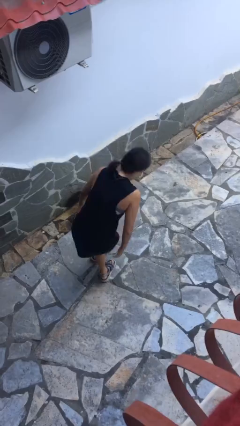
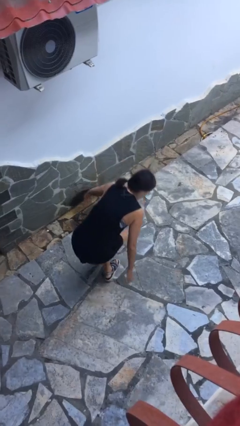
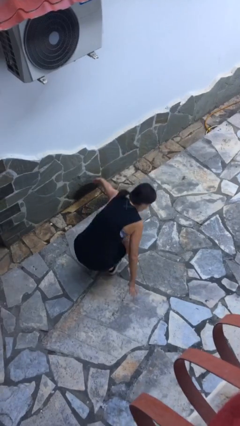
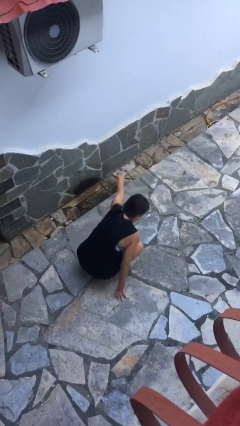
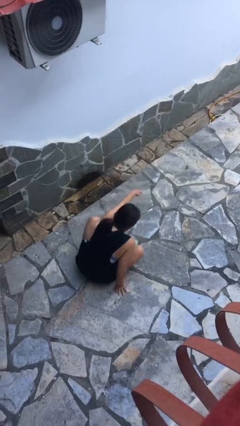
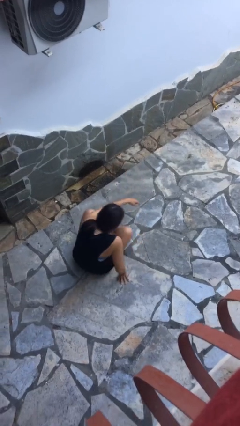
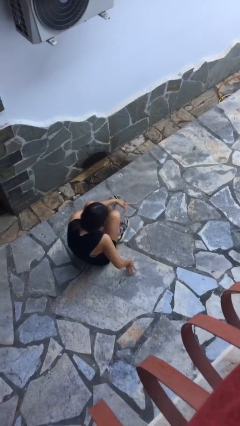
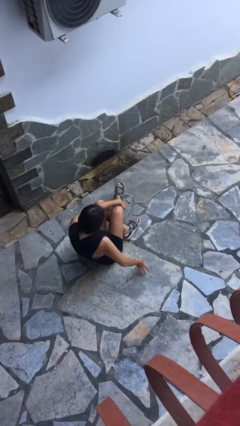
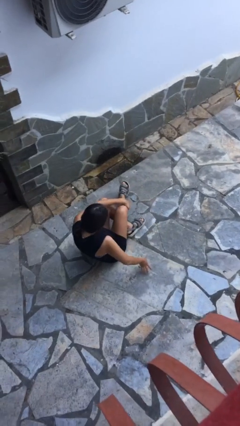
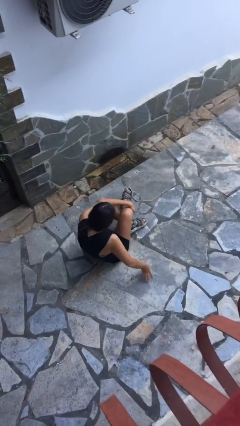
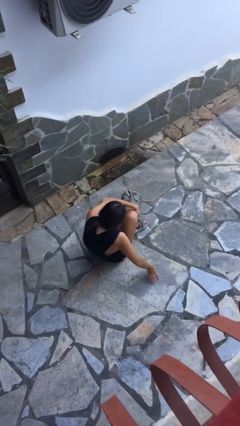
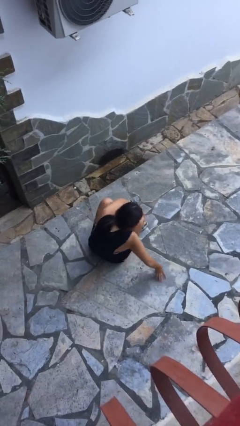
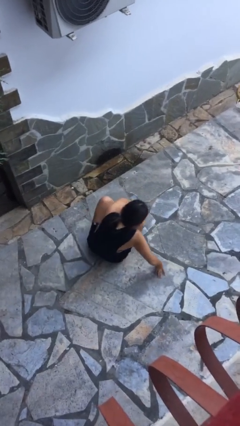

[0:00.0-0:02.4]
person sits crisscross

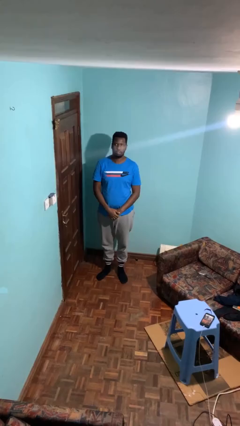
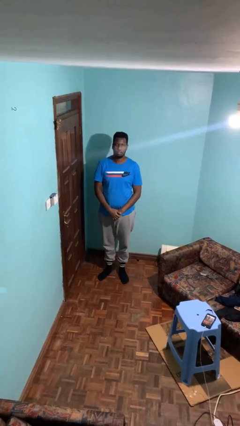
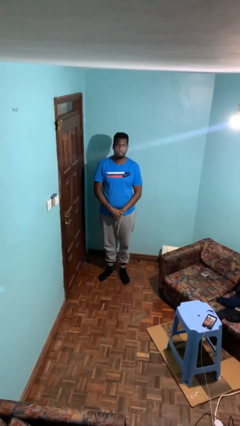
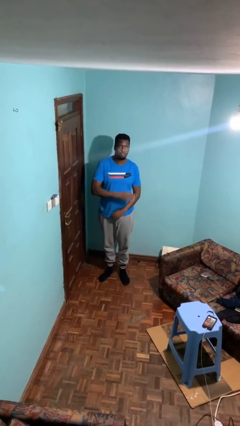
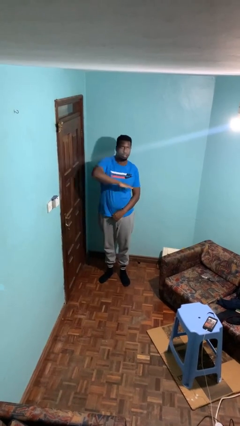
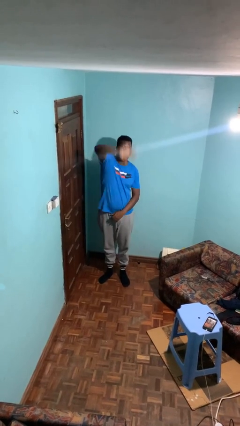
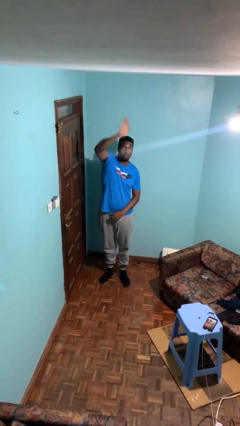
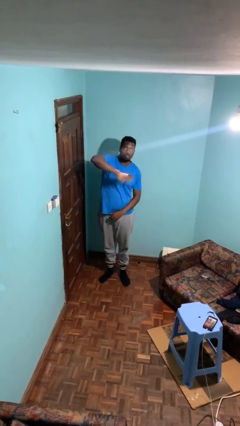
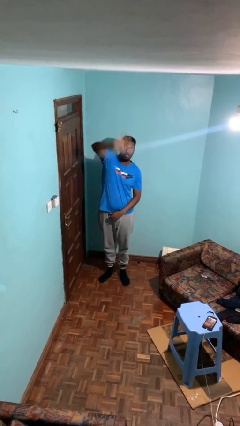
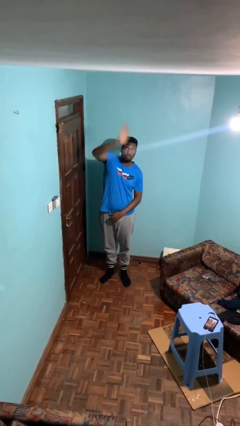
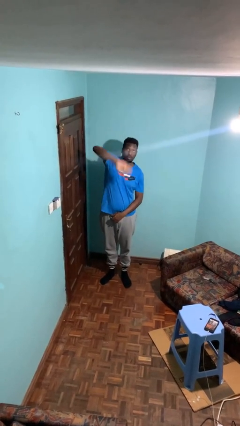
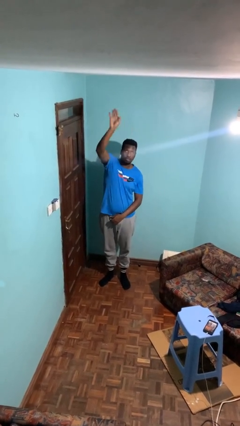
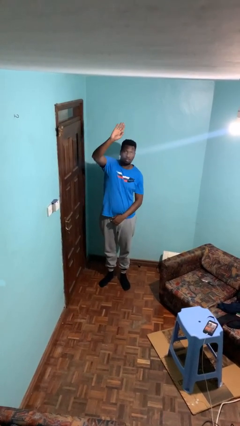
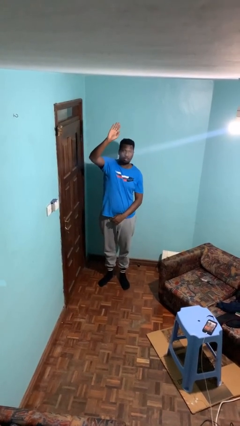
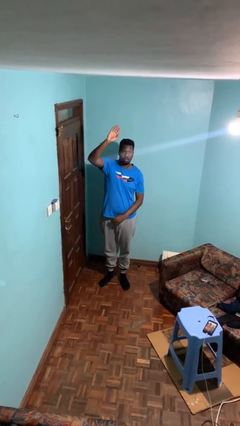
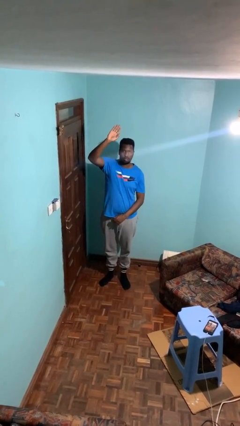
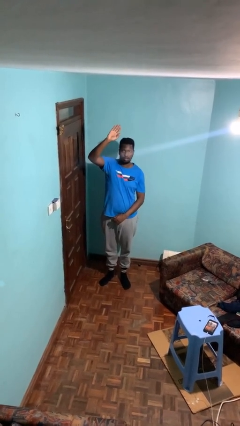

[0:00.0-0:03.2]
person gestures swipe up

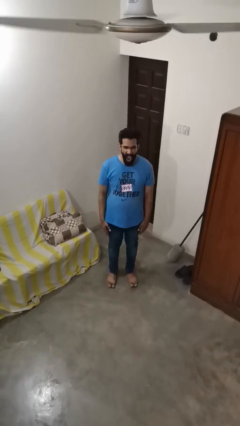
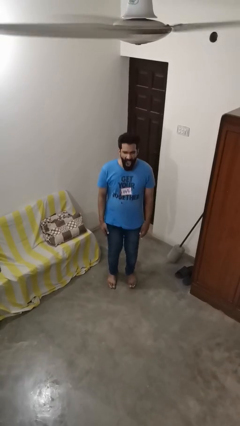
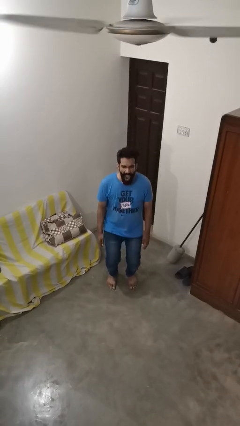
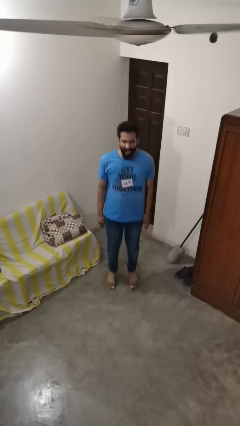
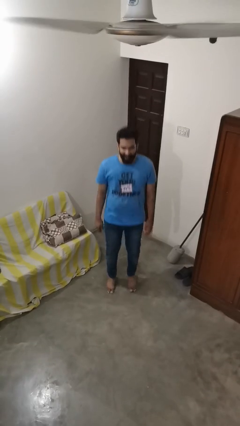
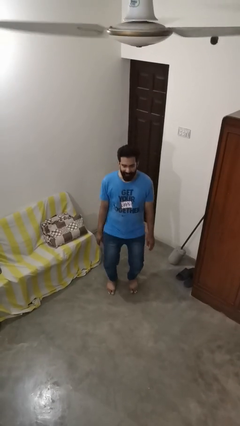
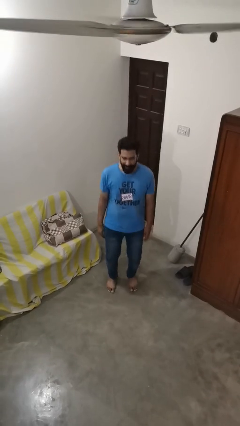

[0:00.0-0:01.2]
person jumps

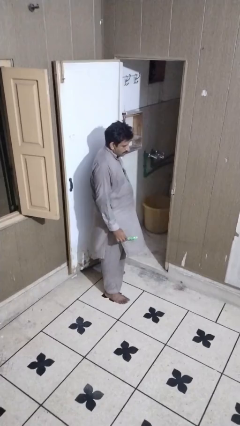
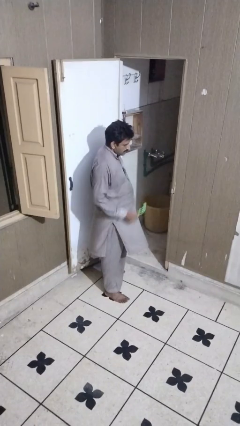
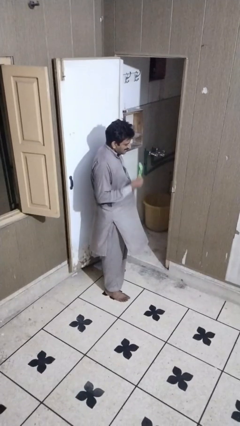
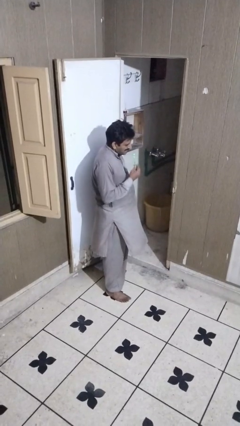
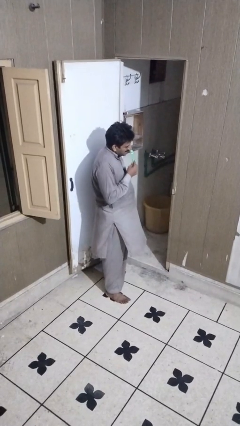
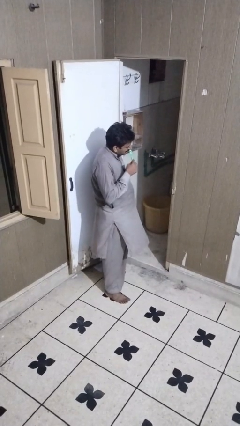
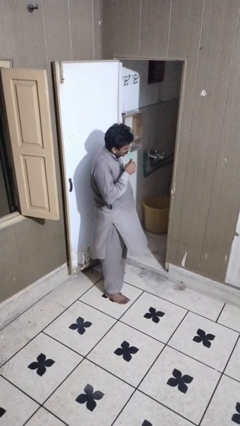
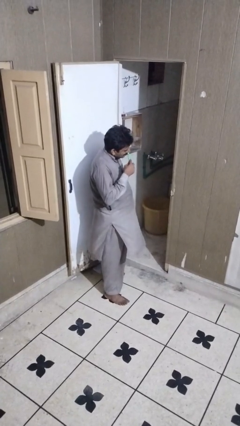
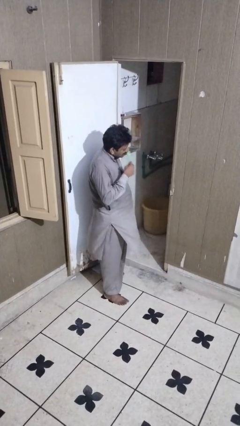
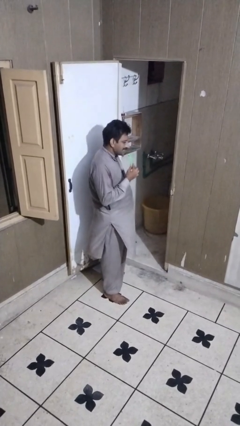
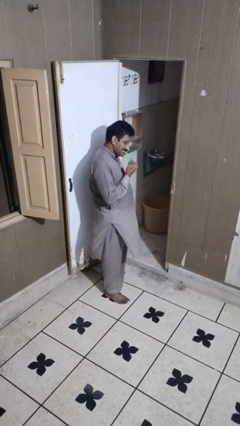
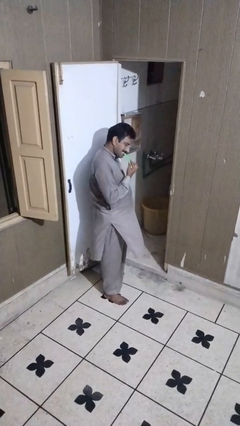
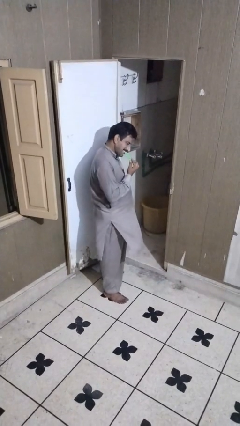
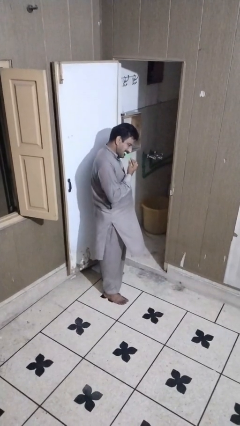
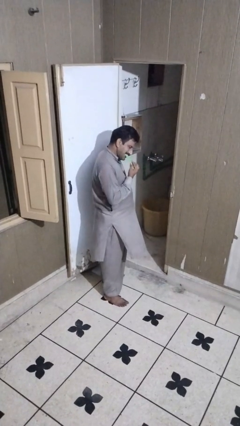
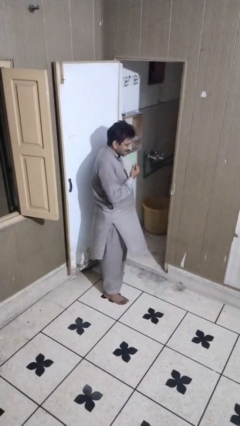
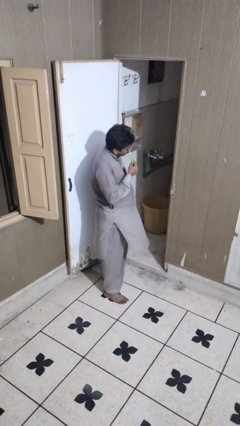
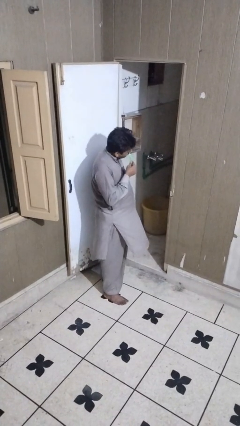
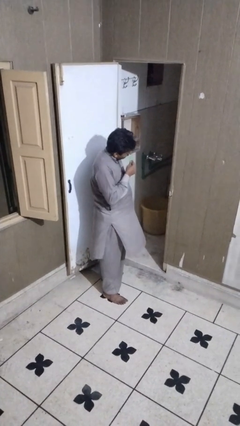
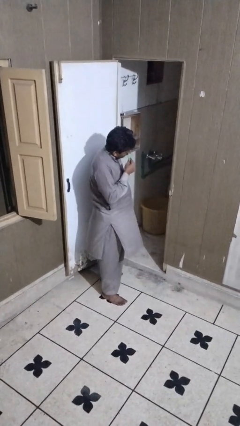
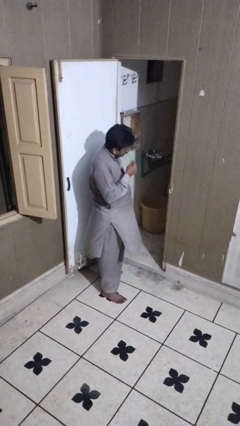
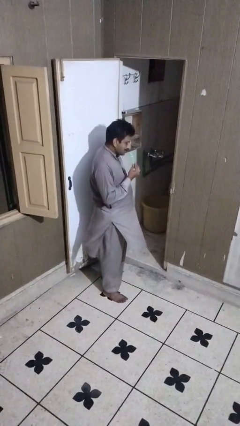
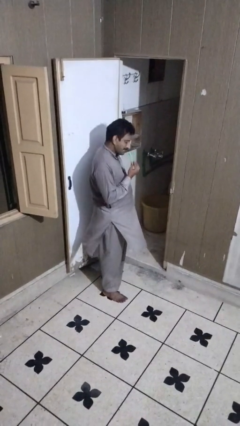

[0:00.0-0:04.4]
person brushes teeth

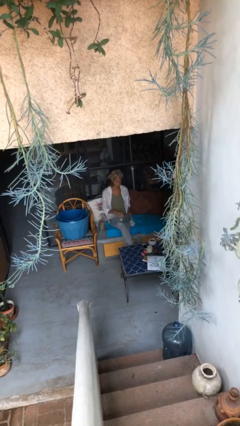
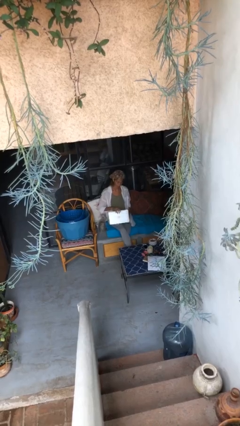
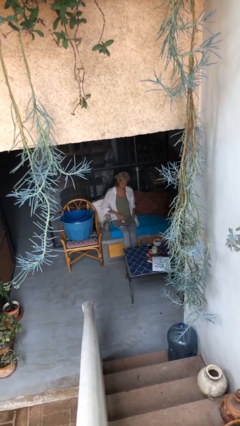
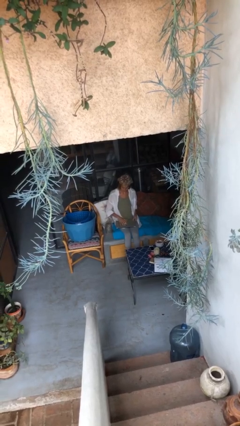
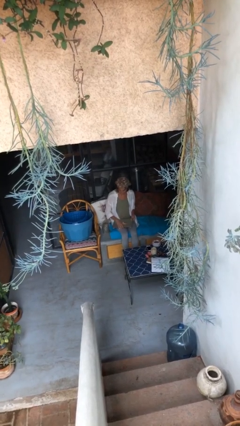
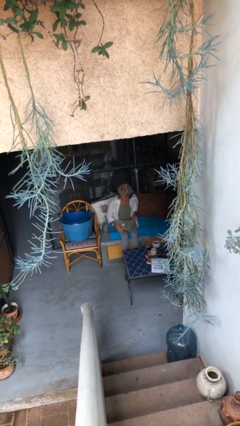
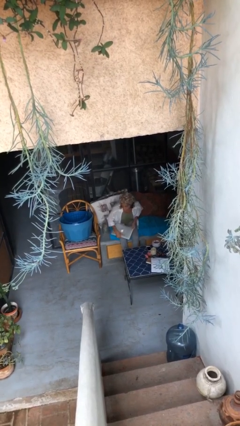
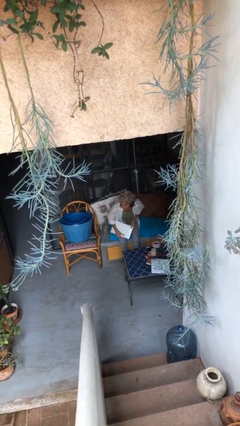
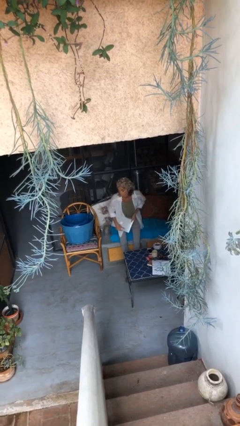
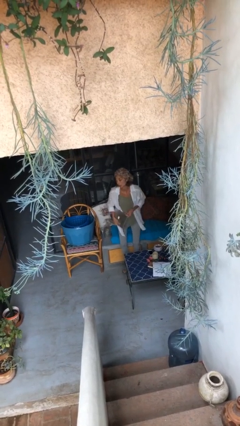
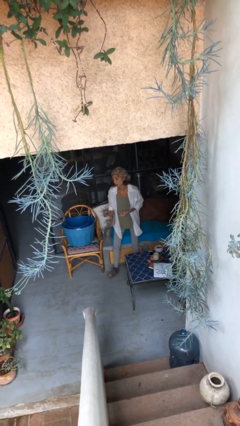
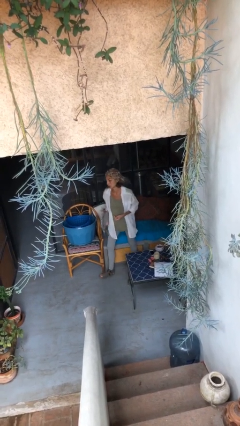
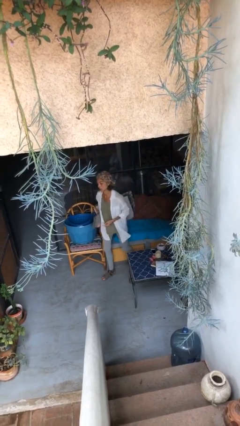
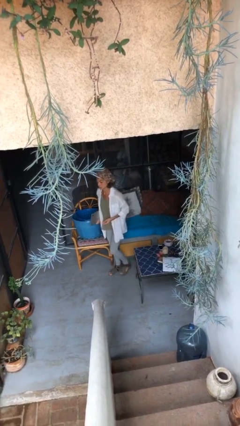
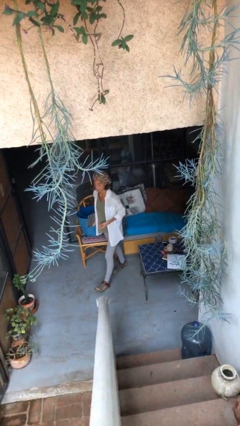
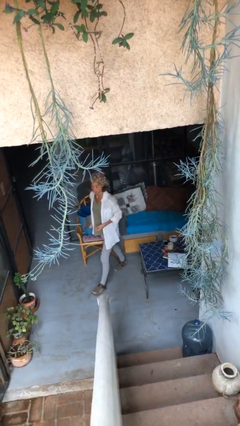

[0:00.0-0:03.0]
person stands up

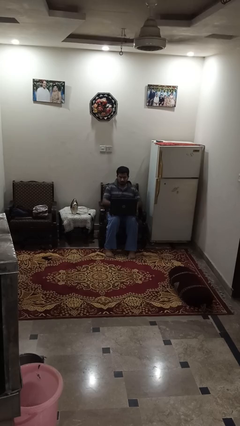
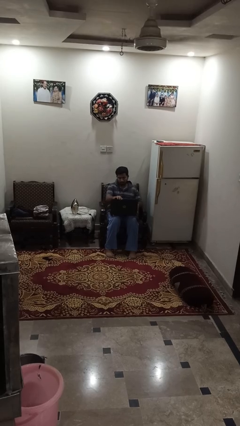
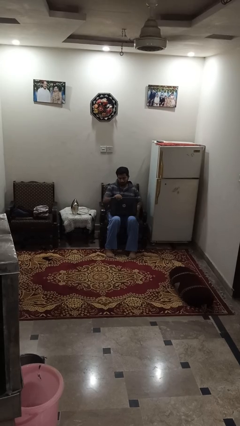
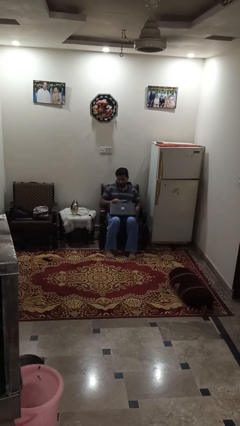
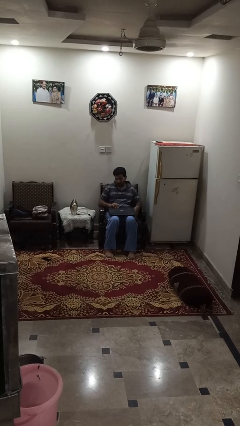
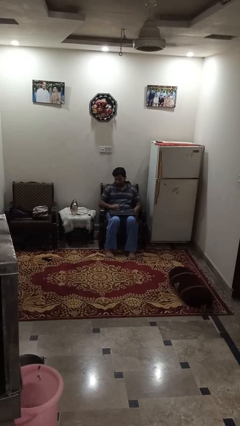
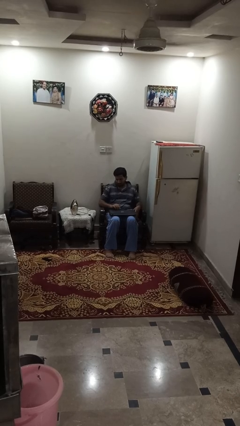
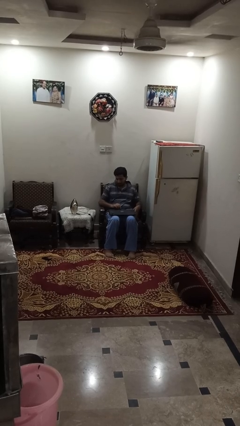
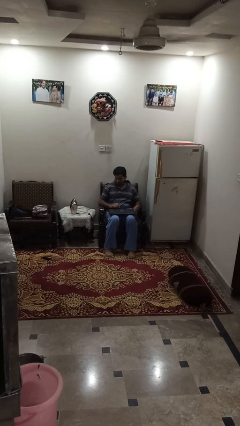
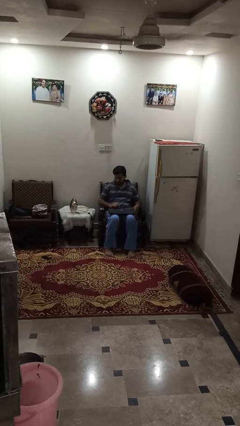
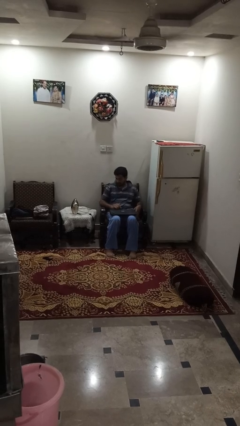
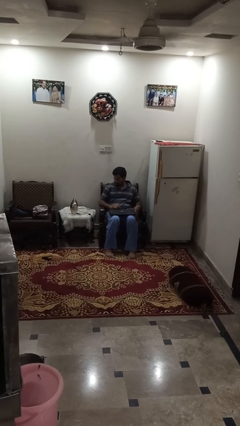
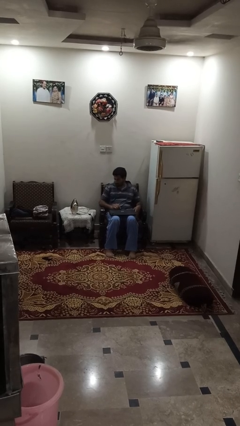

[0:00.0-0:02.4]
person closes laptop

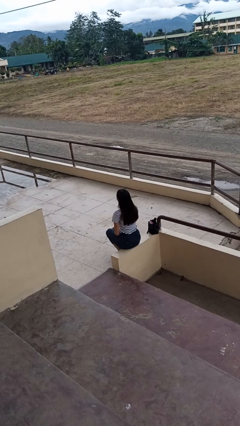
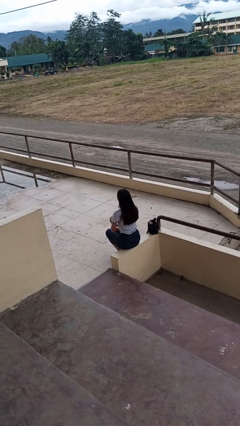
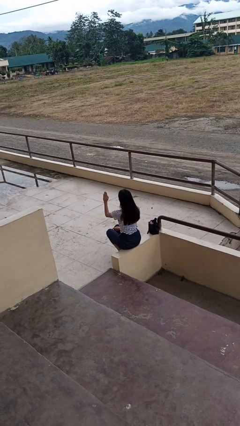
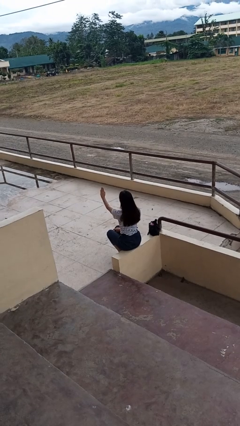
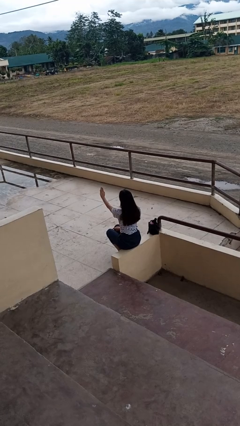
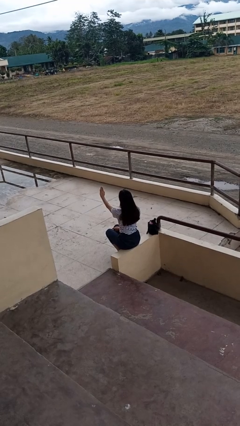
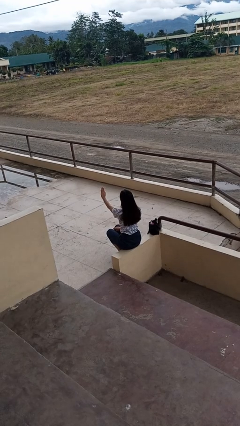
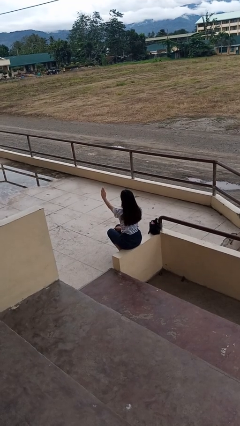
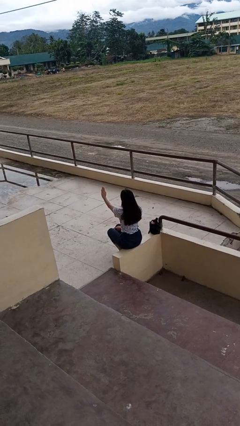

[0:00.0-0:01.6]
person gestures stop
